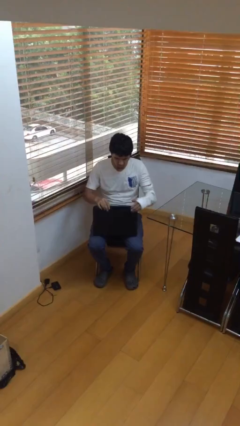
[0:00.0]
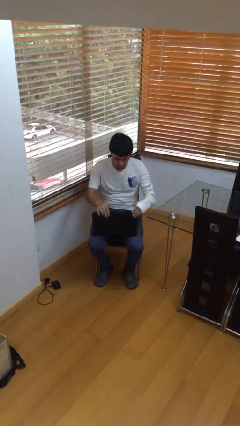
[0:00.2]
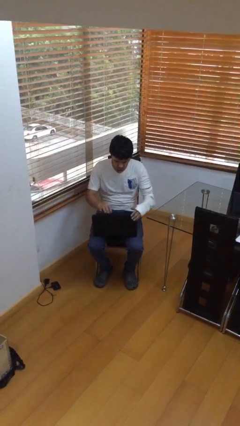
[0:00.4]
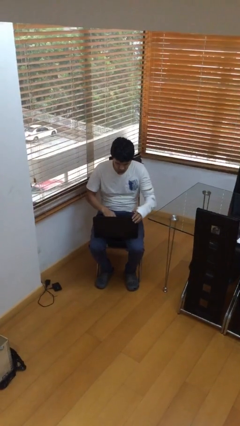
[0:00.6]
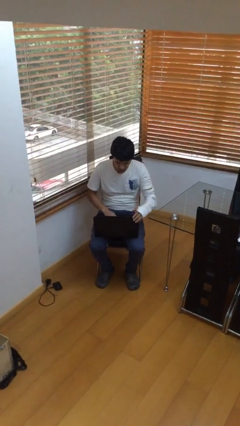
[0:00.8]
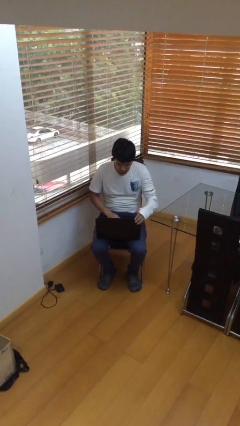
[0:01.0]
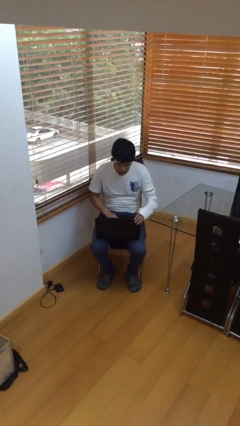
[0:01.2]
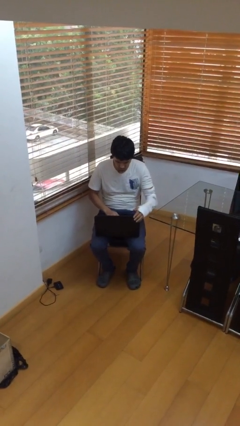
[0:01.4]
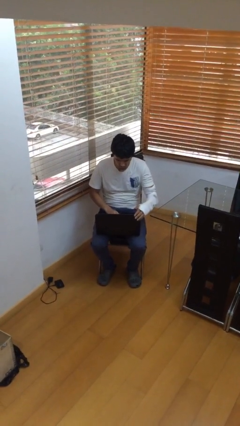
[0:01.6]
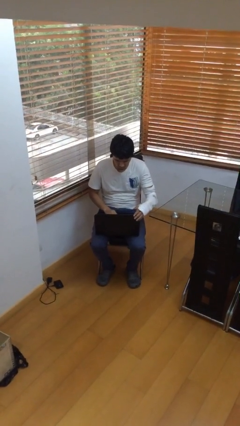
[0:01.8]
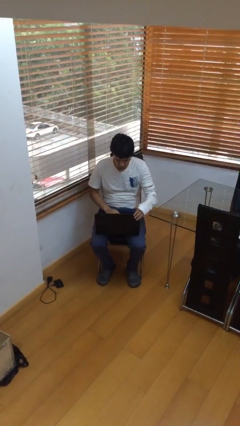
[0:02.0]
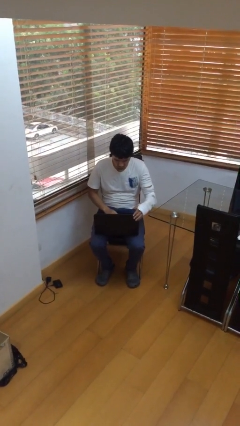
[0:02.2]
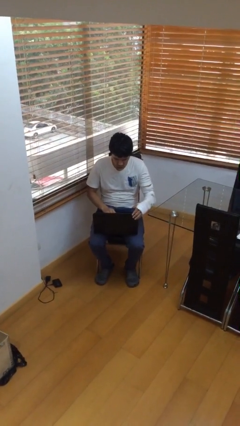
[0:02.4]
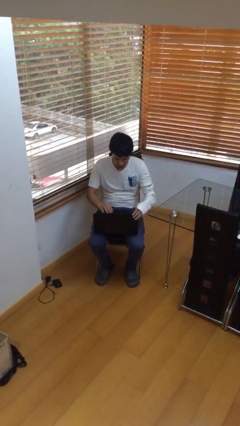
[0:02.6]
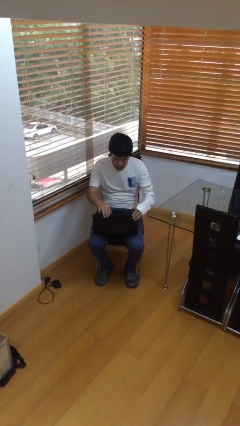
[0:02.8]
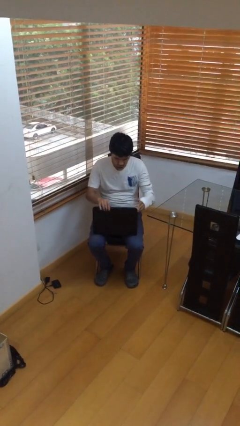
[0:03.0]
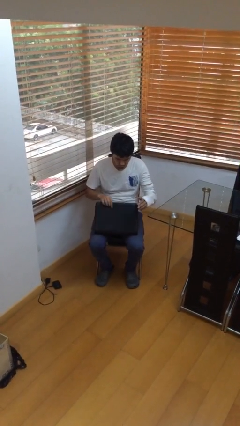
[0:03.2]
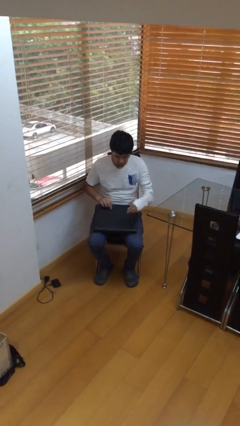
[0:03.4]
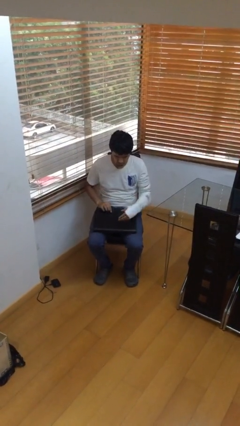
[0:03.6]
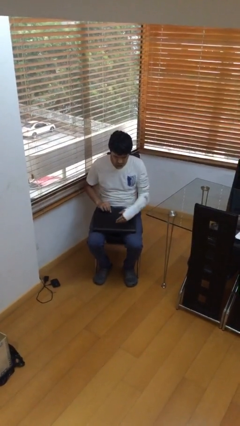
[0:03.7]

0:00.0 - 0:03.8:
person interacts with laptop

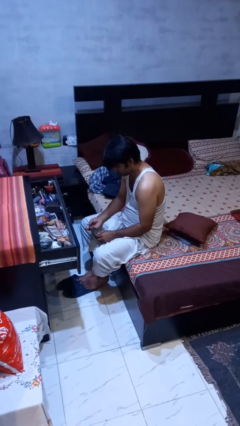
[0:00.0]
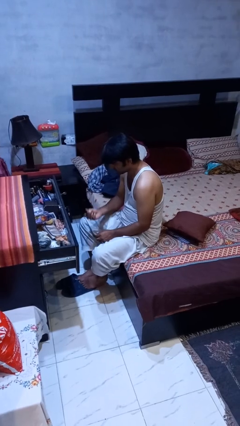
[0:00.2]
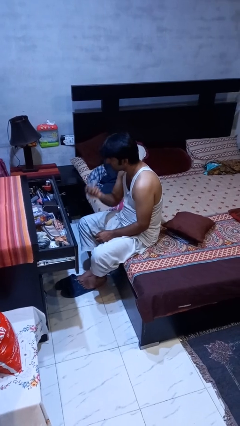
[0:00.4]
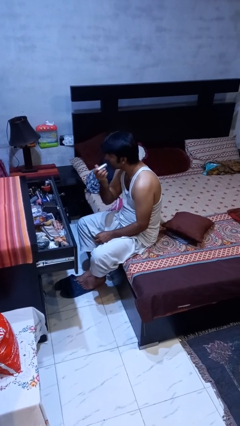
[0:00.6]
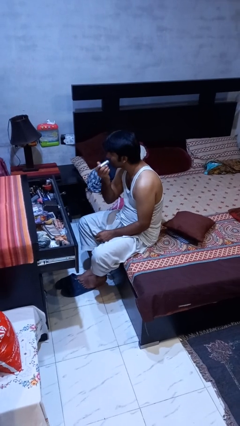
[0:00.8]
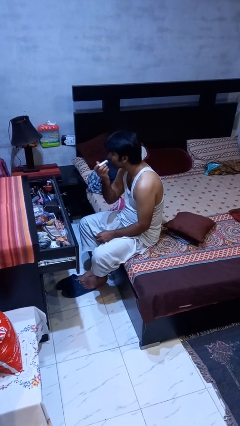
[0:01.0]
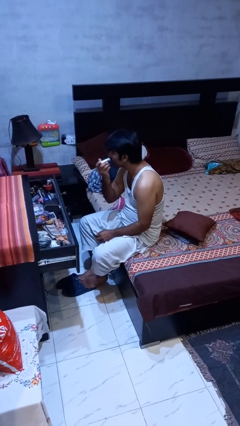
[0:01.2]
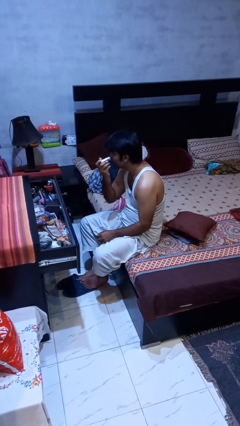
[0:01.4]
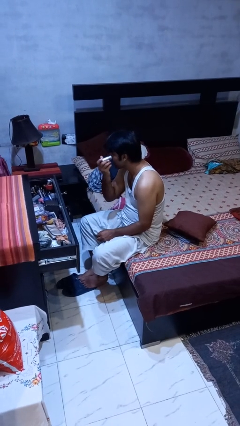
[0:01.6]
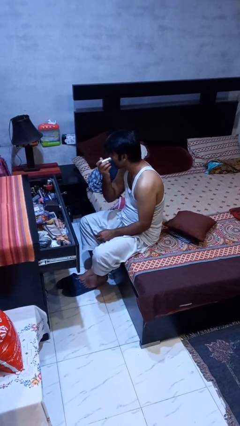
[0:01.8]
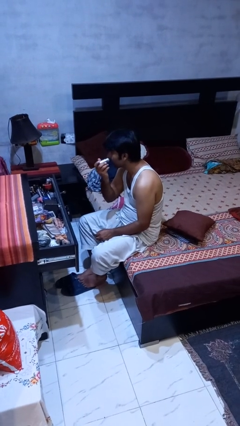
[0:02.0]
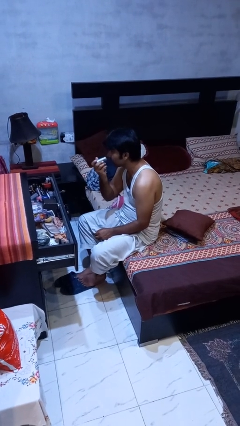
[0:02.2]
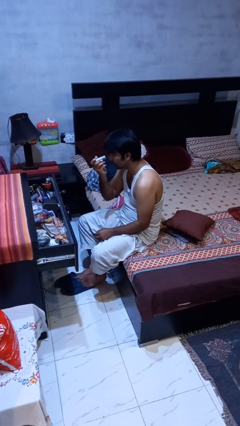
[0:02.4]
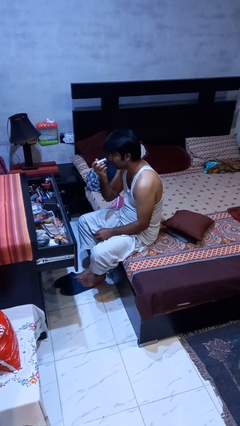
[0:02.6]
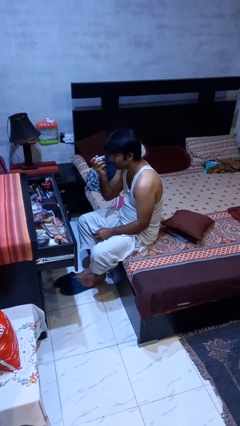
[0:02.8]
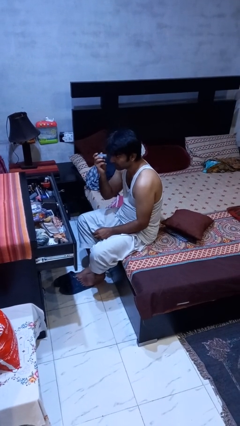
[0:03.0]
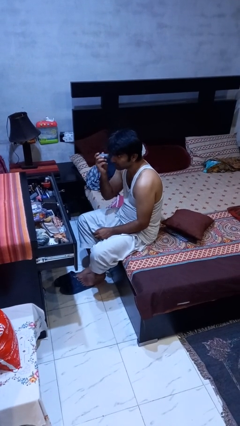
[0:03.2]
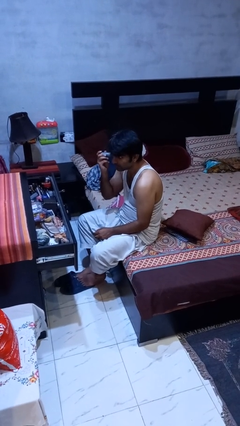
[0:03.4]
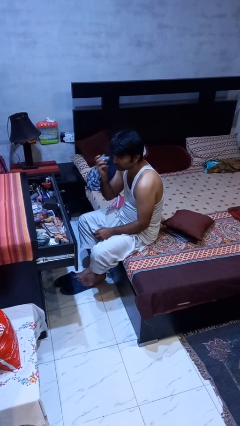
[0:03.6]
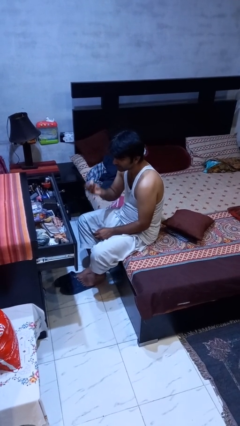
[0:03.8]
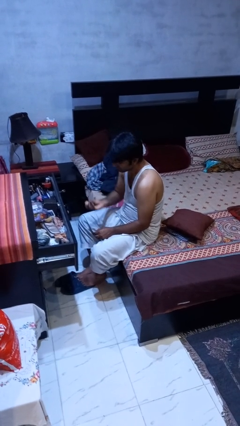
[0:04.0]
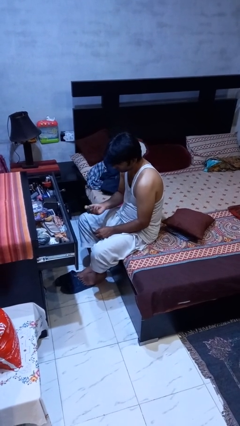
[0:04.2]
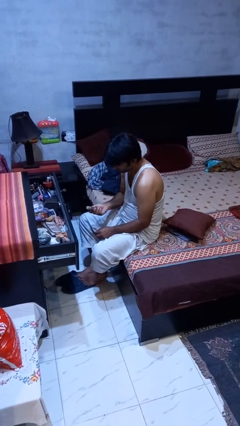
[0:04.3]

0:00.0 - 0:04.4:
person applies foundation makeup

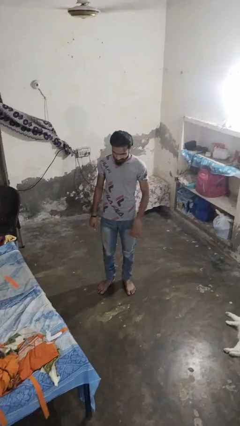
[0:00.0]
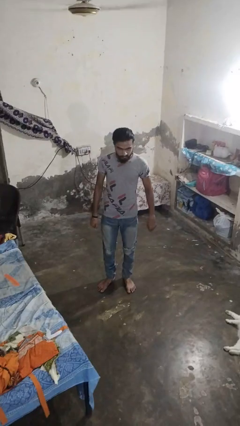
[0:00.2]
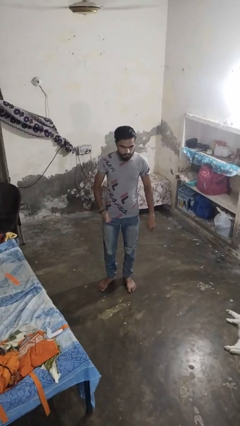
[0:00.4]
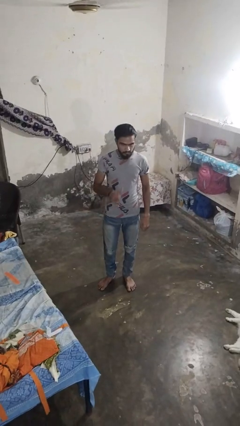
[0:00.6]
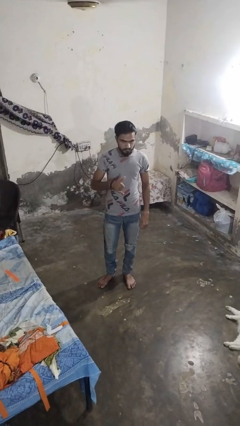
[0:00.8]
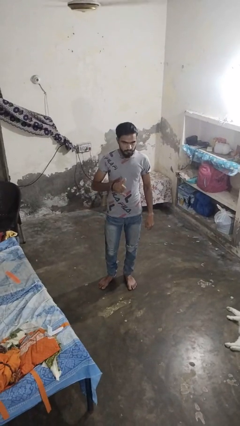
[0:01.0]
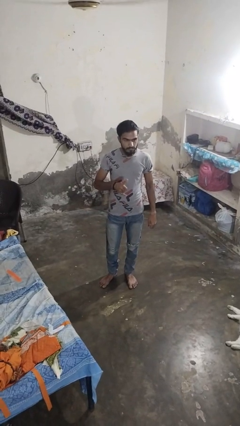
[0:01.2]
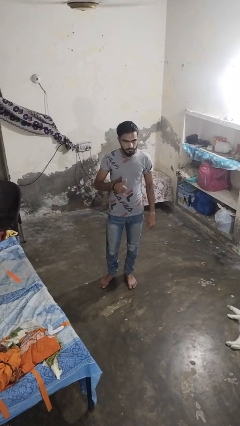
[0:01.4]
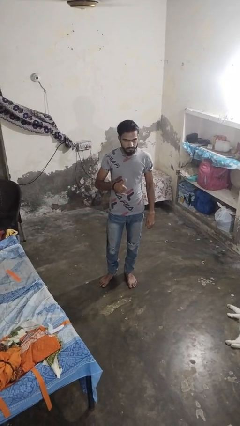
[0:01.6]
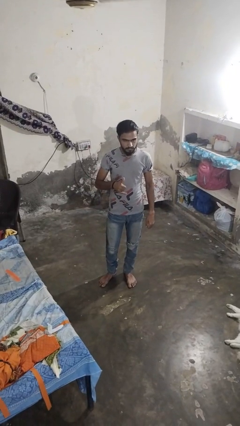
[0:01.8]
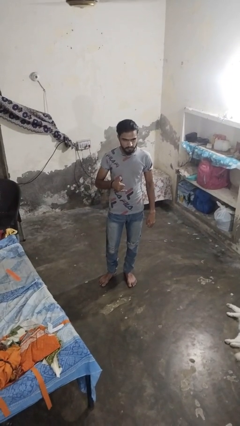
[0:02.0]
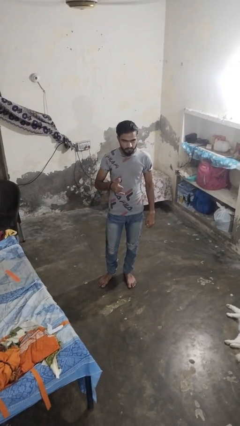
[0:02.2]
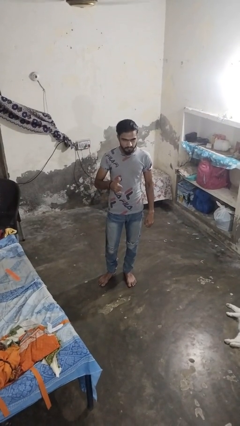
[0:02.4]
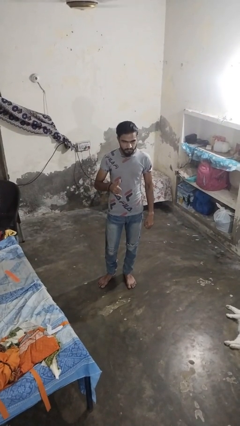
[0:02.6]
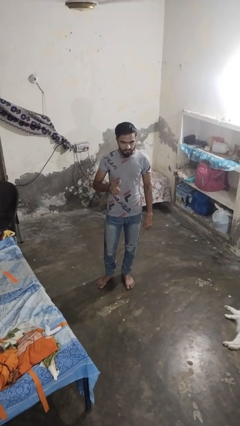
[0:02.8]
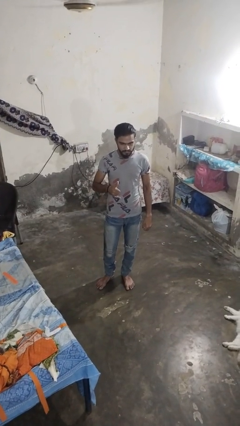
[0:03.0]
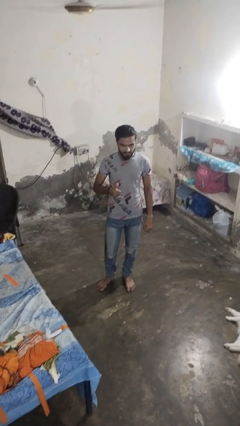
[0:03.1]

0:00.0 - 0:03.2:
person gestures hang loose

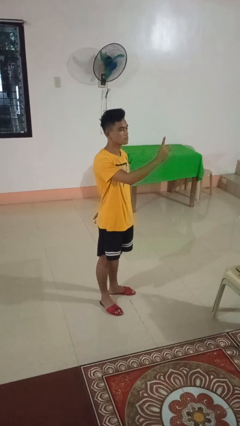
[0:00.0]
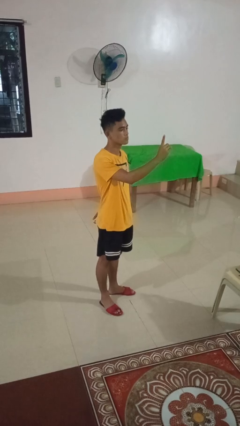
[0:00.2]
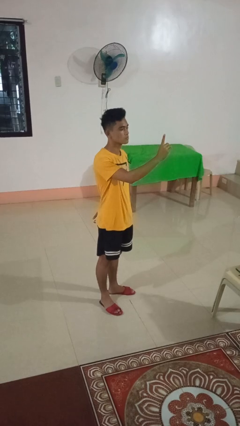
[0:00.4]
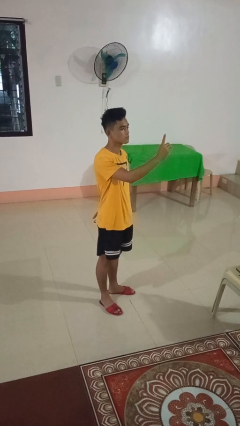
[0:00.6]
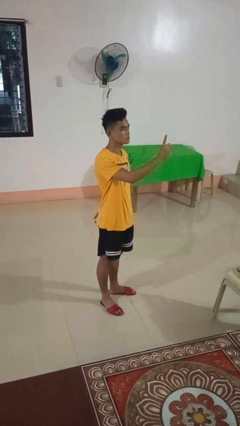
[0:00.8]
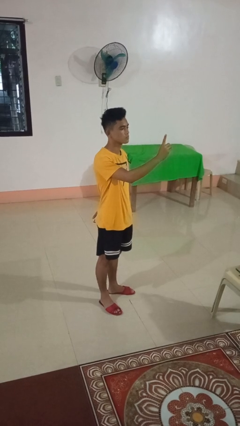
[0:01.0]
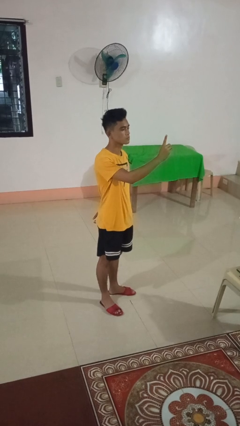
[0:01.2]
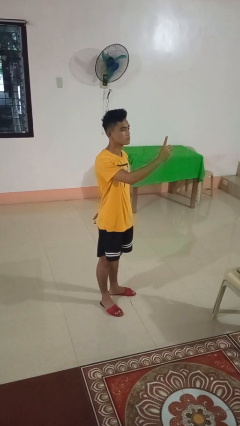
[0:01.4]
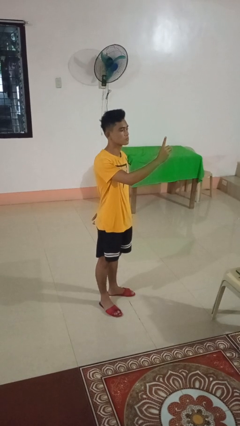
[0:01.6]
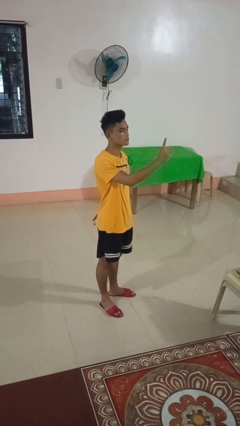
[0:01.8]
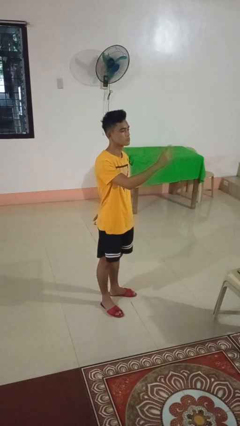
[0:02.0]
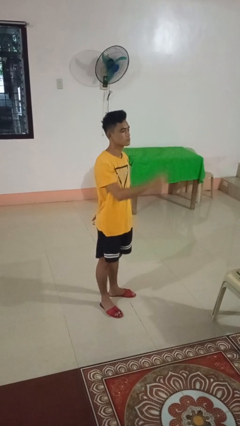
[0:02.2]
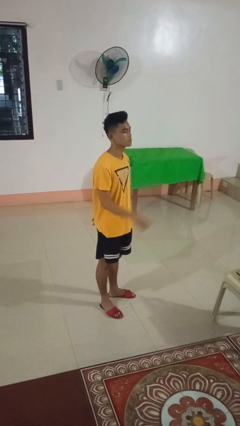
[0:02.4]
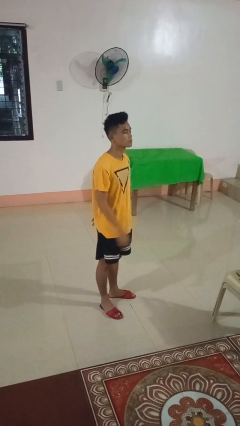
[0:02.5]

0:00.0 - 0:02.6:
person gestures number one

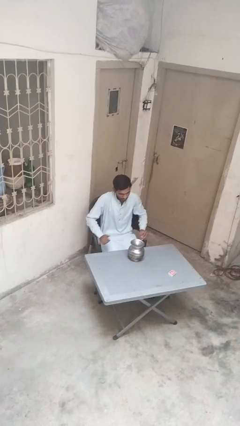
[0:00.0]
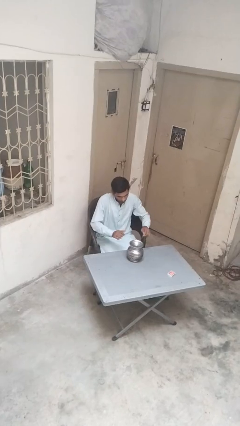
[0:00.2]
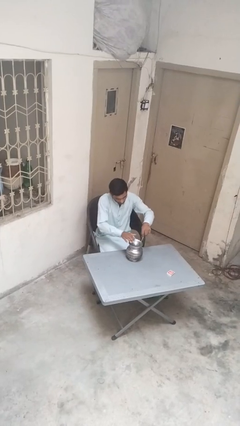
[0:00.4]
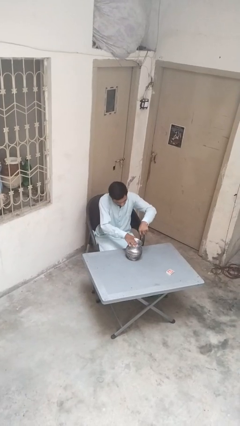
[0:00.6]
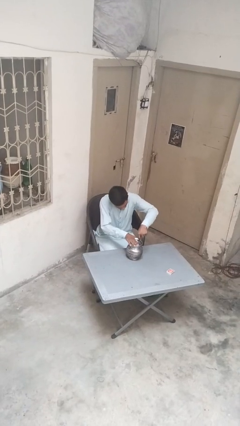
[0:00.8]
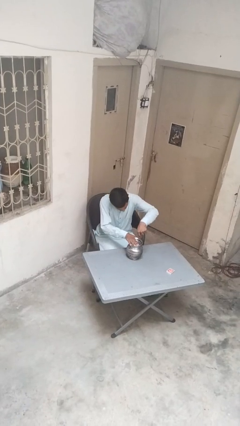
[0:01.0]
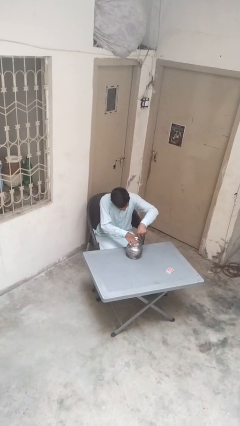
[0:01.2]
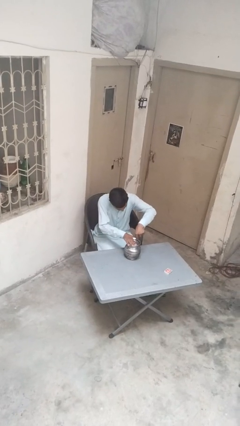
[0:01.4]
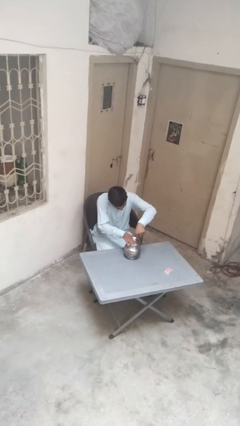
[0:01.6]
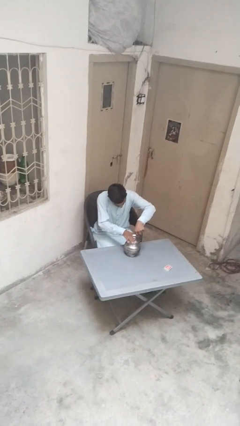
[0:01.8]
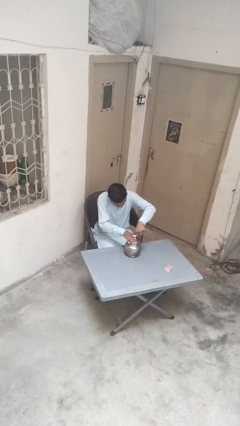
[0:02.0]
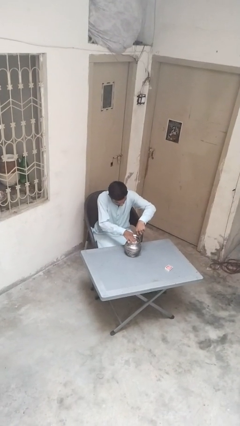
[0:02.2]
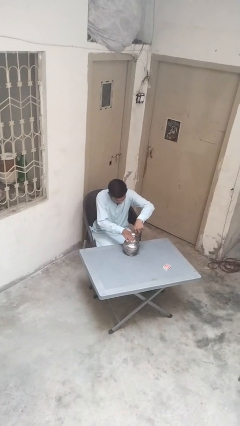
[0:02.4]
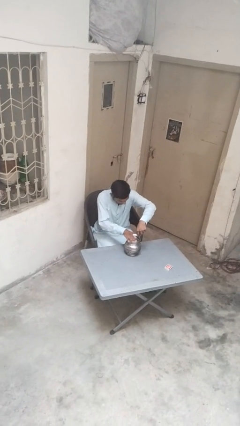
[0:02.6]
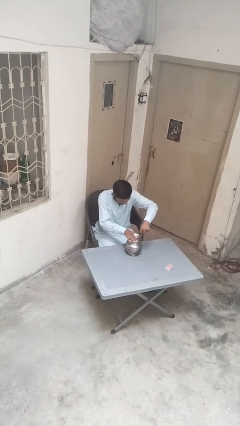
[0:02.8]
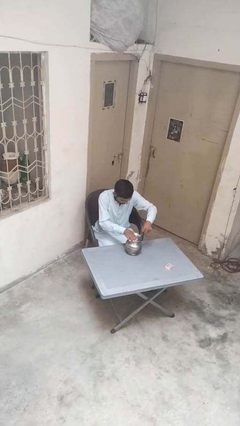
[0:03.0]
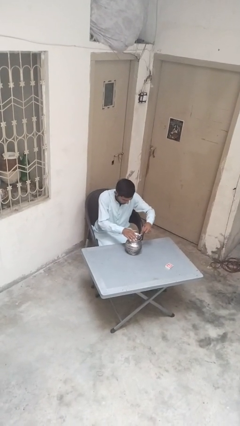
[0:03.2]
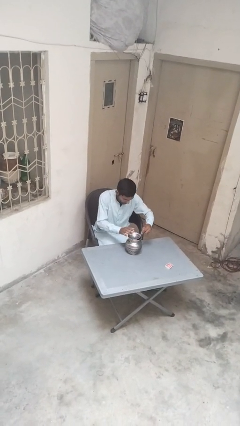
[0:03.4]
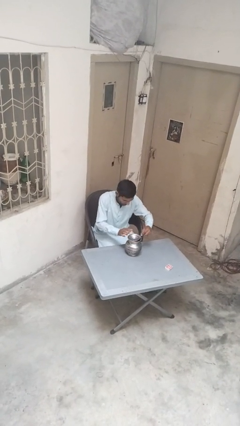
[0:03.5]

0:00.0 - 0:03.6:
person opens can with can opener

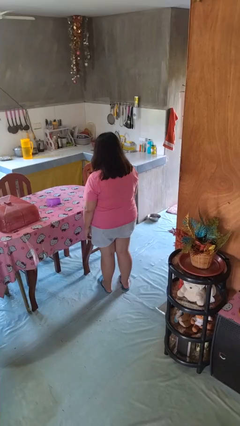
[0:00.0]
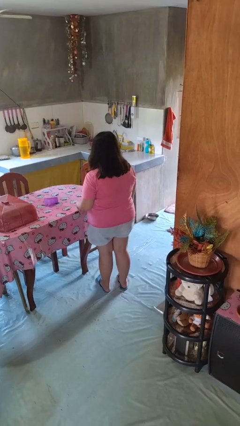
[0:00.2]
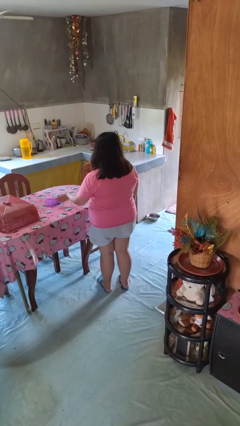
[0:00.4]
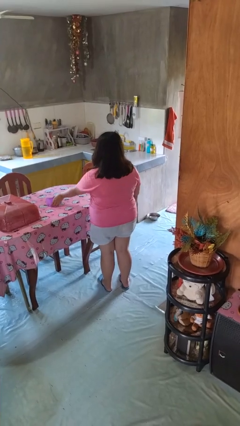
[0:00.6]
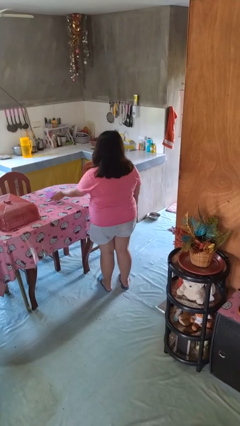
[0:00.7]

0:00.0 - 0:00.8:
person sets upright glass
